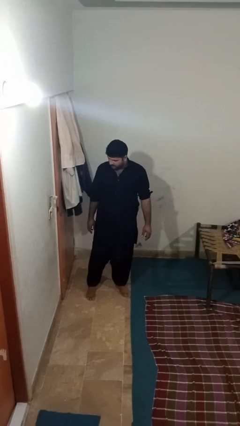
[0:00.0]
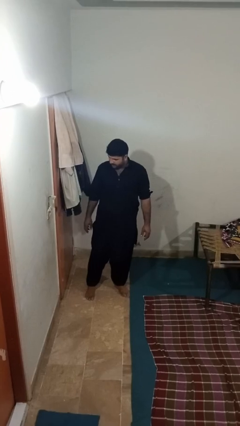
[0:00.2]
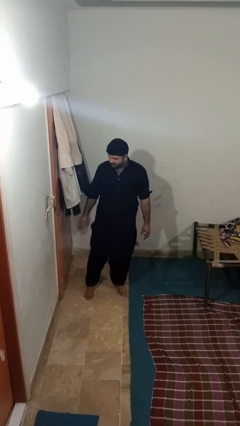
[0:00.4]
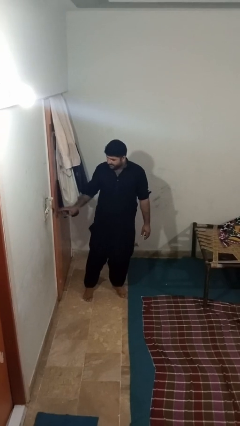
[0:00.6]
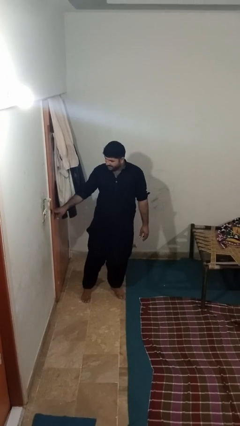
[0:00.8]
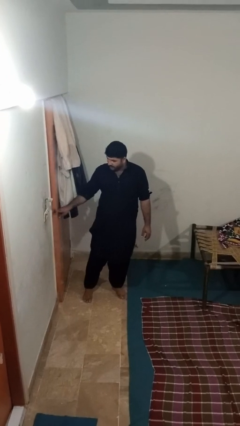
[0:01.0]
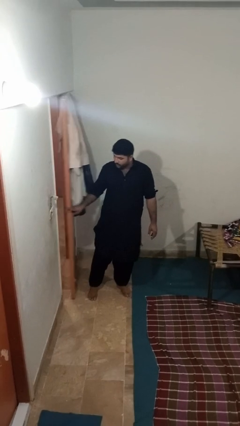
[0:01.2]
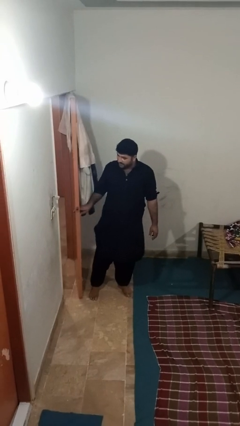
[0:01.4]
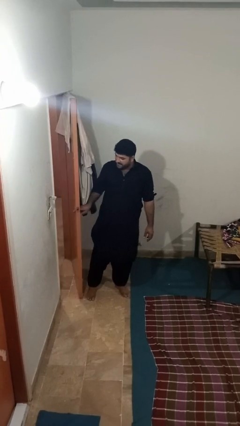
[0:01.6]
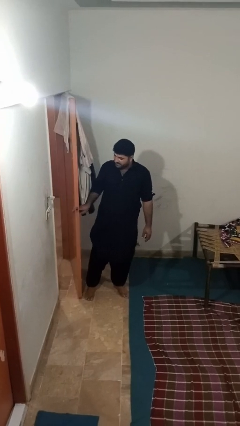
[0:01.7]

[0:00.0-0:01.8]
person opens facility door

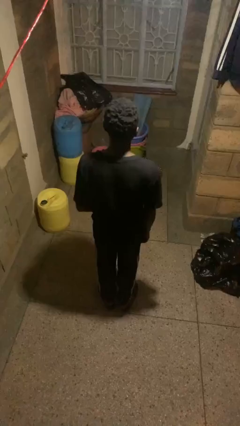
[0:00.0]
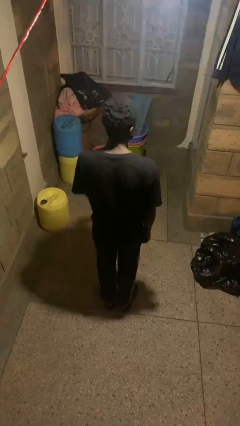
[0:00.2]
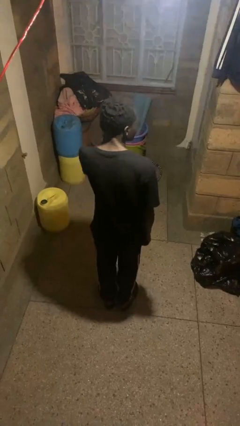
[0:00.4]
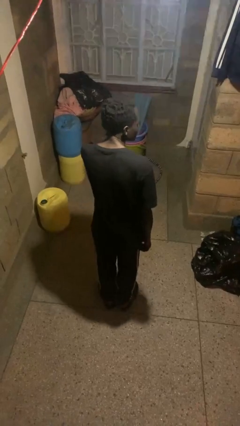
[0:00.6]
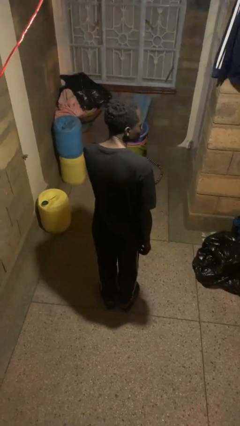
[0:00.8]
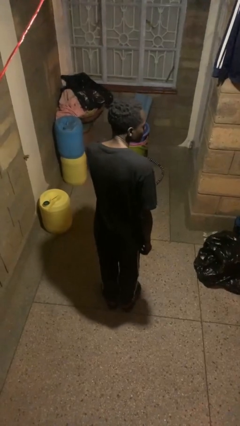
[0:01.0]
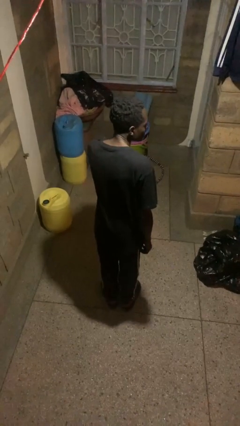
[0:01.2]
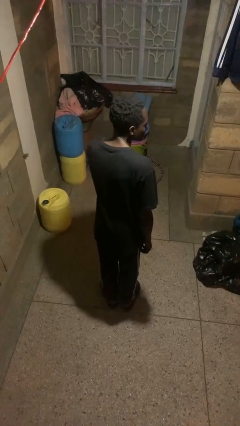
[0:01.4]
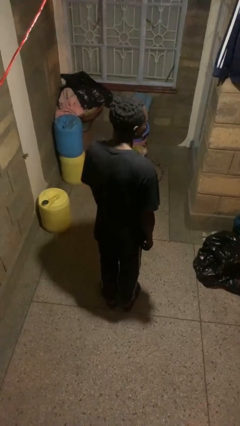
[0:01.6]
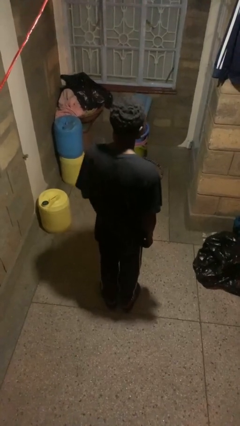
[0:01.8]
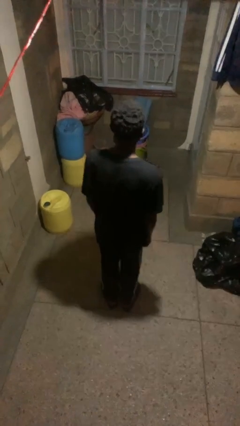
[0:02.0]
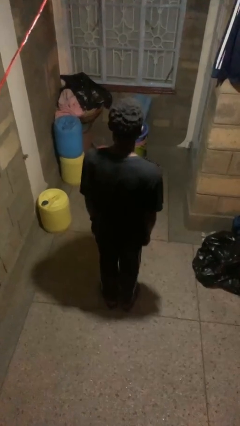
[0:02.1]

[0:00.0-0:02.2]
person touches earlobe

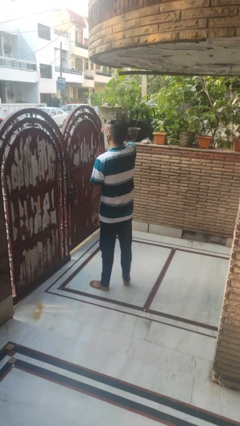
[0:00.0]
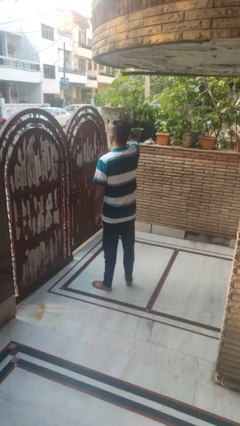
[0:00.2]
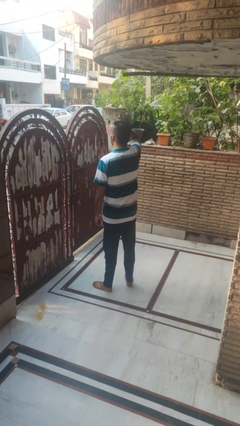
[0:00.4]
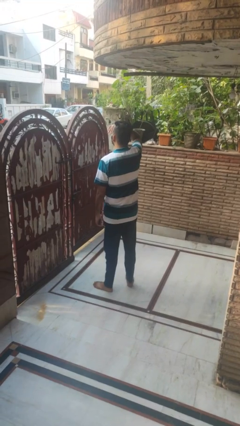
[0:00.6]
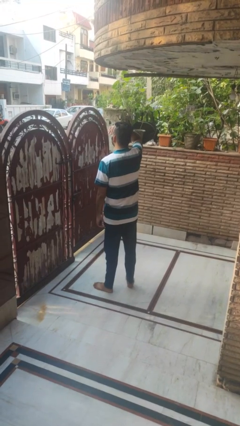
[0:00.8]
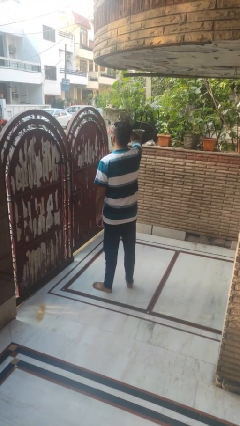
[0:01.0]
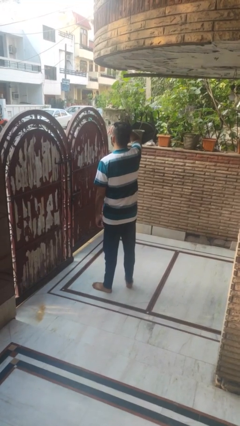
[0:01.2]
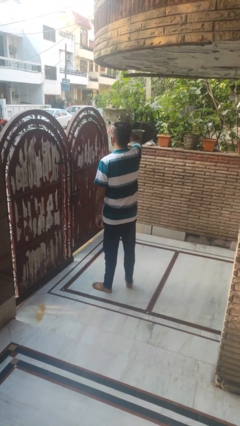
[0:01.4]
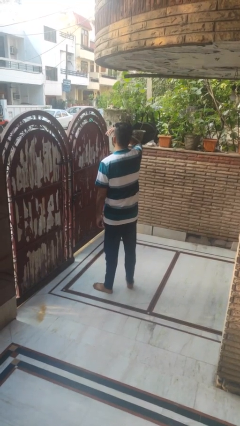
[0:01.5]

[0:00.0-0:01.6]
person shades eyes

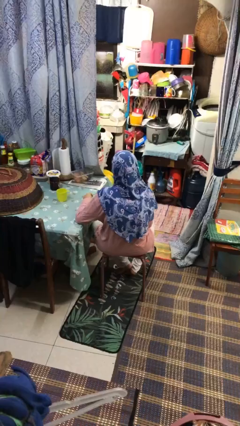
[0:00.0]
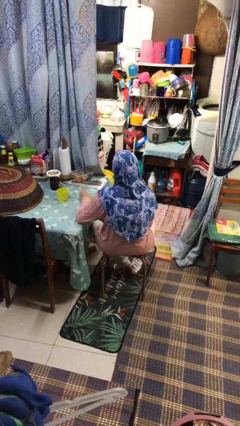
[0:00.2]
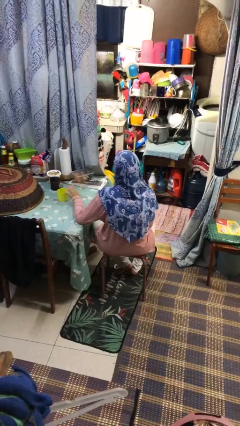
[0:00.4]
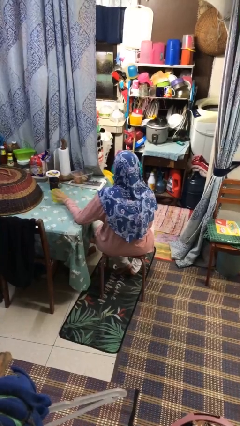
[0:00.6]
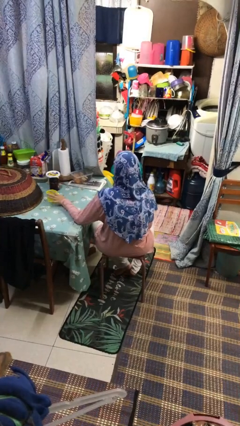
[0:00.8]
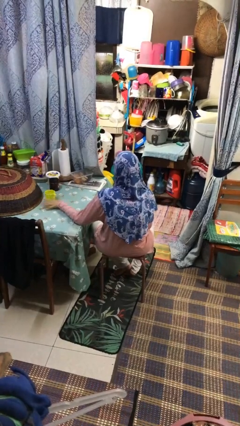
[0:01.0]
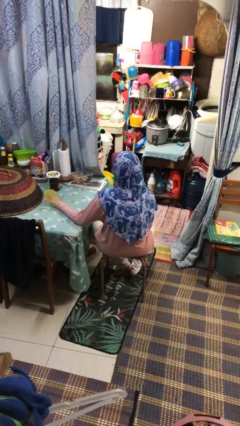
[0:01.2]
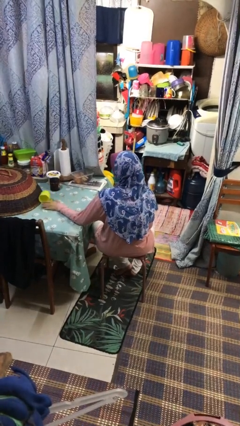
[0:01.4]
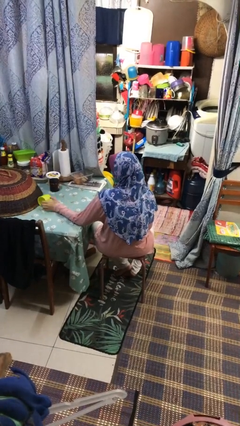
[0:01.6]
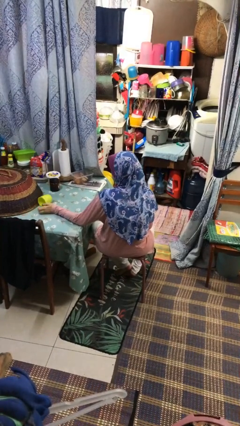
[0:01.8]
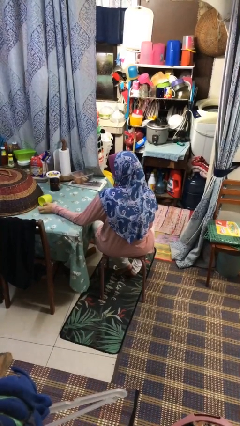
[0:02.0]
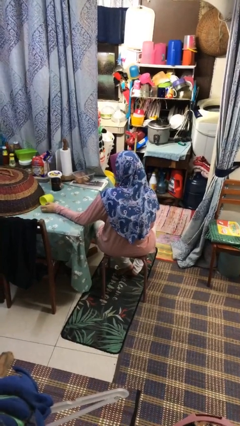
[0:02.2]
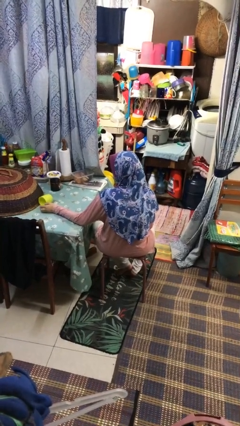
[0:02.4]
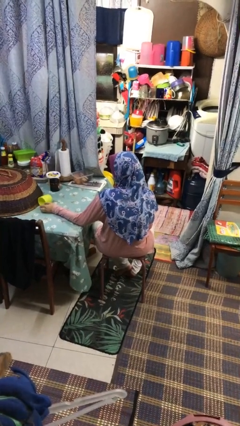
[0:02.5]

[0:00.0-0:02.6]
person knocks over glass

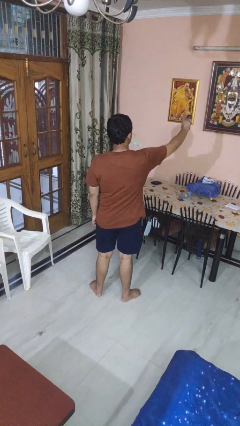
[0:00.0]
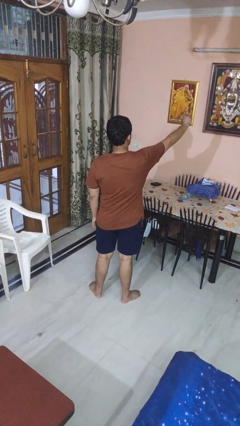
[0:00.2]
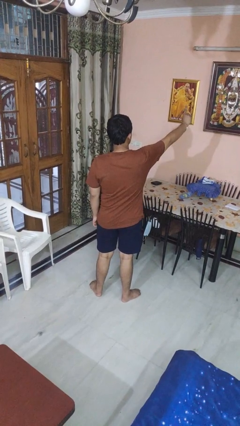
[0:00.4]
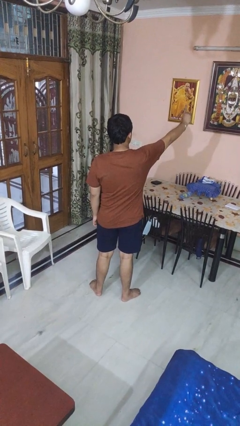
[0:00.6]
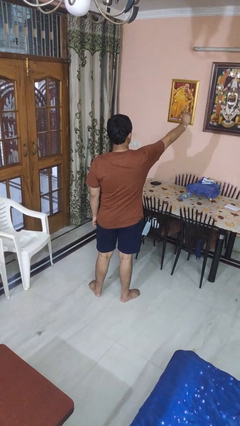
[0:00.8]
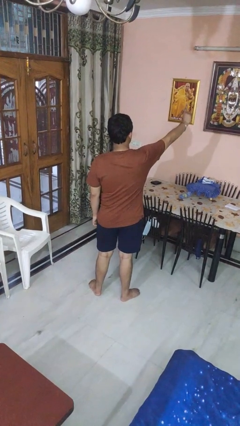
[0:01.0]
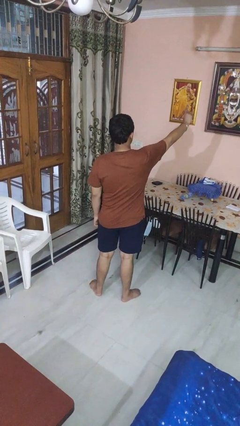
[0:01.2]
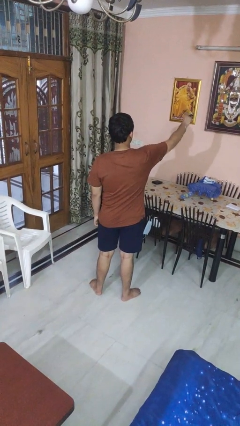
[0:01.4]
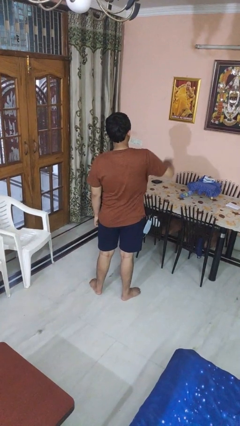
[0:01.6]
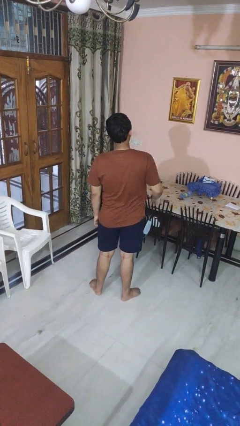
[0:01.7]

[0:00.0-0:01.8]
person gestures number one

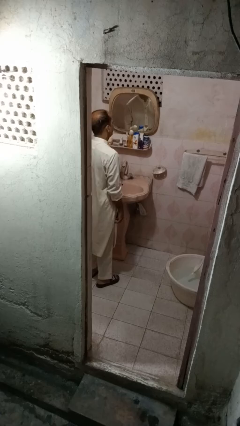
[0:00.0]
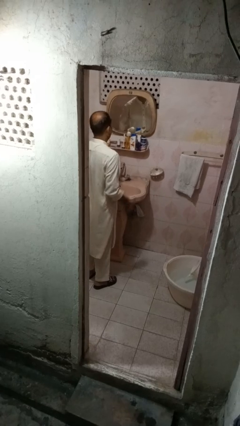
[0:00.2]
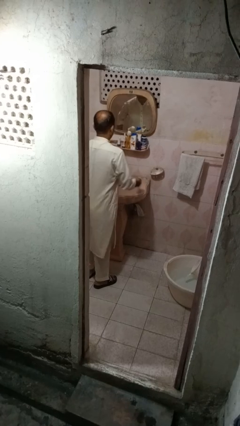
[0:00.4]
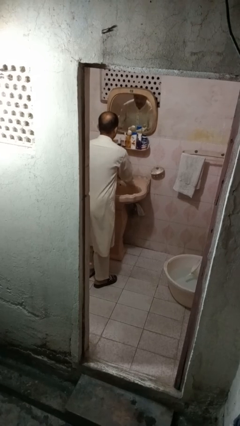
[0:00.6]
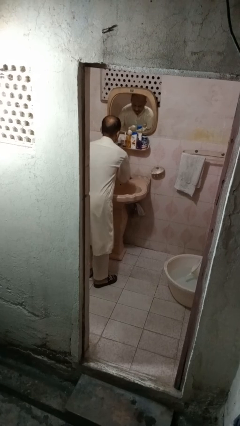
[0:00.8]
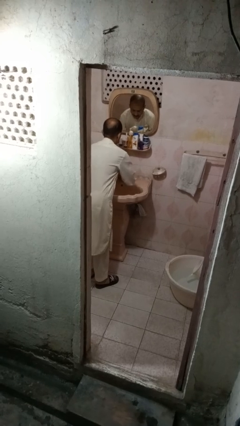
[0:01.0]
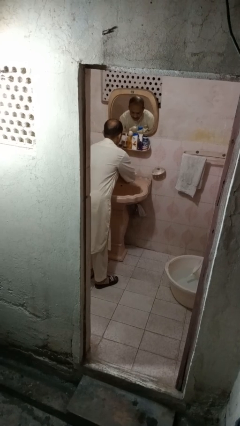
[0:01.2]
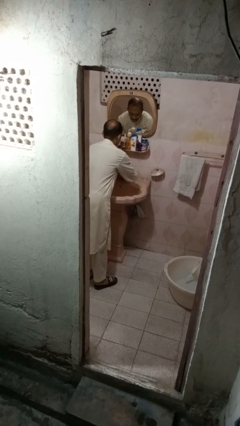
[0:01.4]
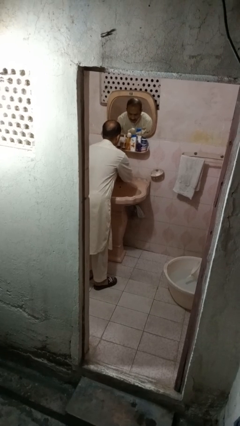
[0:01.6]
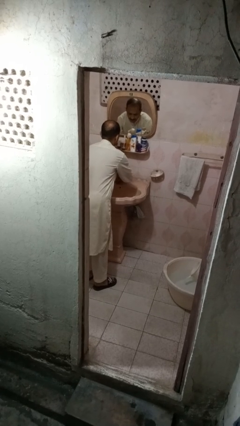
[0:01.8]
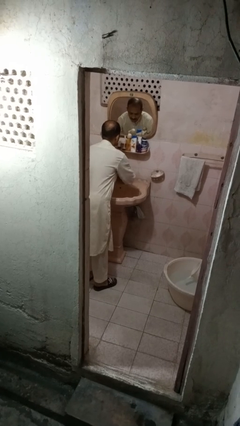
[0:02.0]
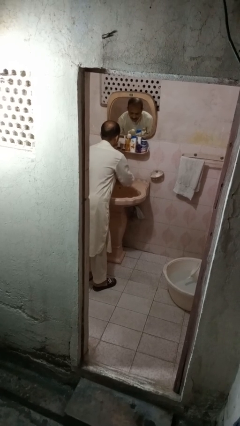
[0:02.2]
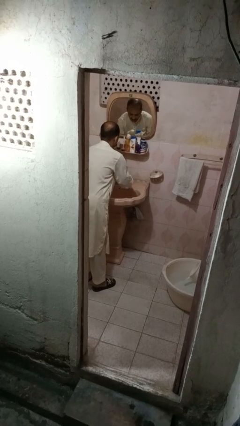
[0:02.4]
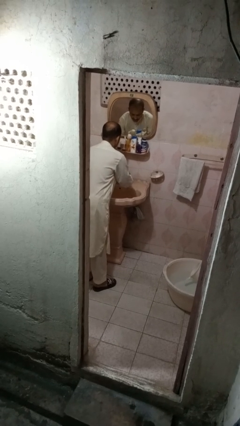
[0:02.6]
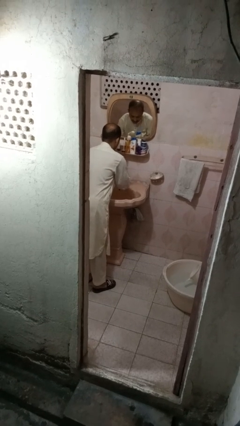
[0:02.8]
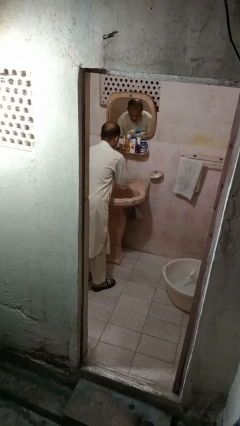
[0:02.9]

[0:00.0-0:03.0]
person washes hands

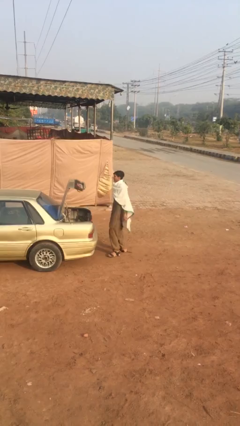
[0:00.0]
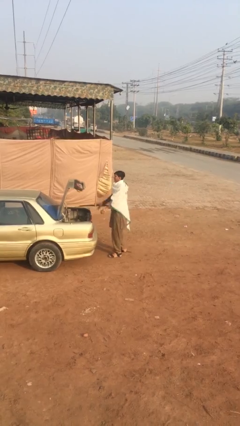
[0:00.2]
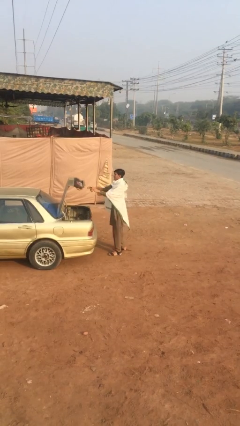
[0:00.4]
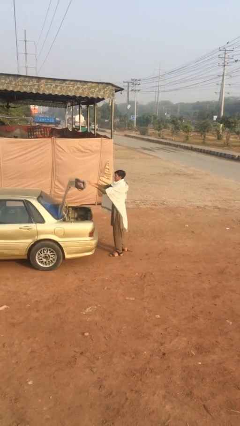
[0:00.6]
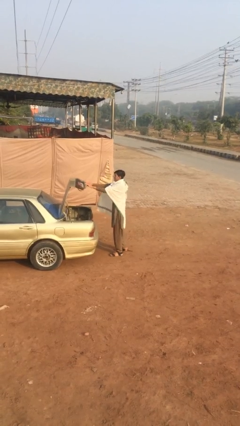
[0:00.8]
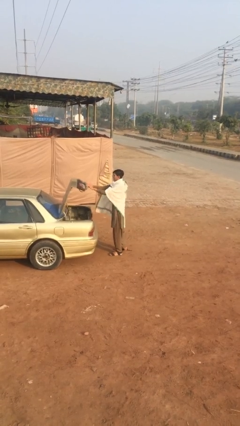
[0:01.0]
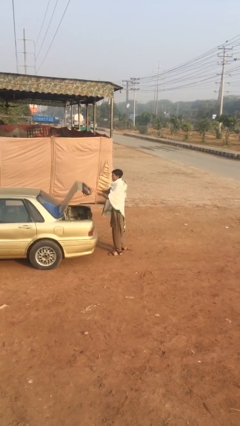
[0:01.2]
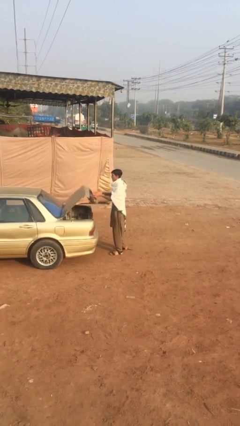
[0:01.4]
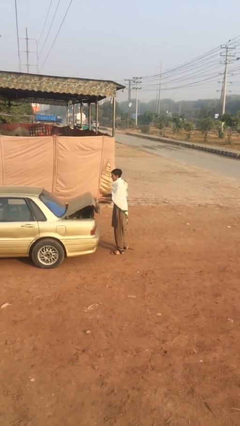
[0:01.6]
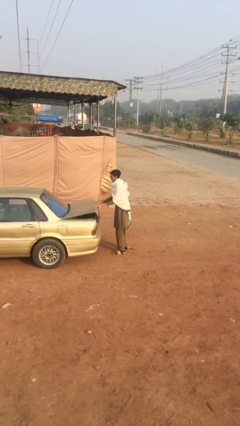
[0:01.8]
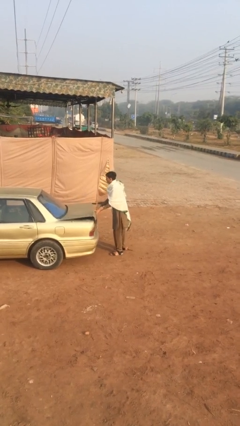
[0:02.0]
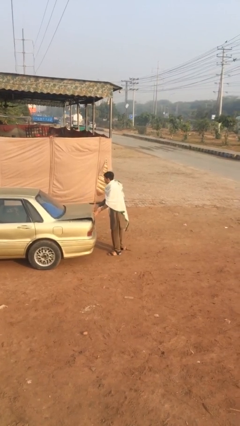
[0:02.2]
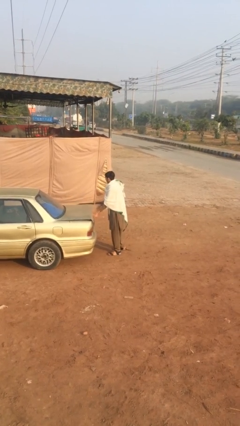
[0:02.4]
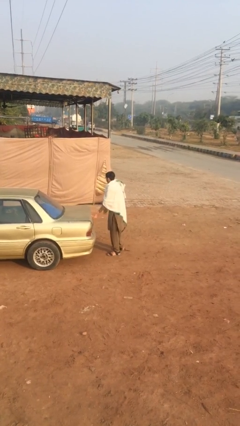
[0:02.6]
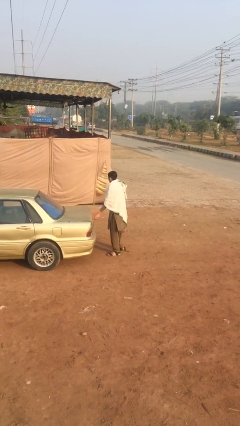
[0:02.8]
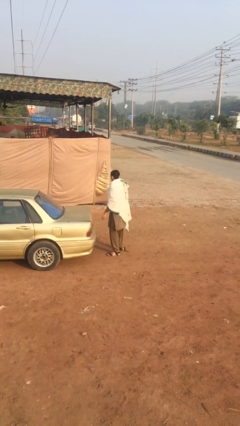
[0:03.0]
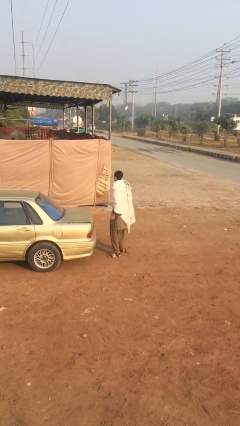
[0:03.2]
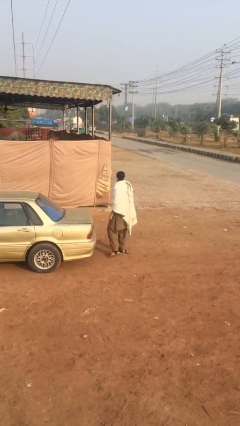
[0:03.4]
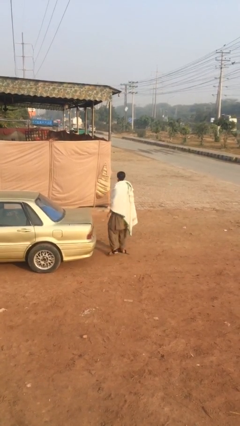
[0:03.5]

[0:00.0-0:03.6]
person closes car trunk

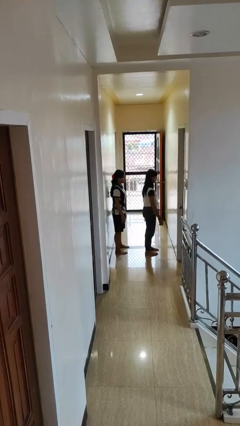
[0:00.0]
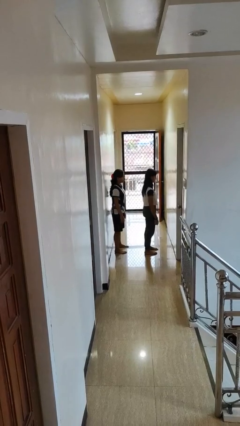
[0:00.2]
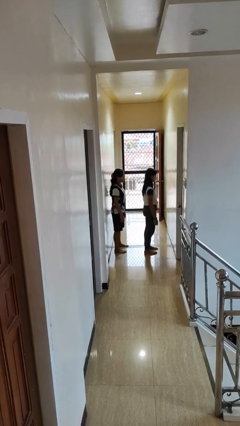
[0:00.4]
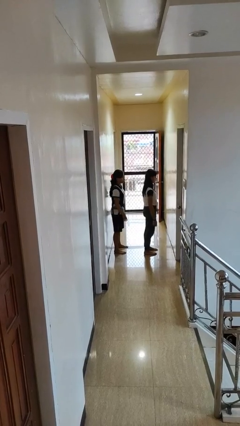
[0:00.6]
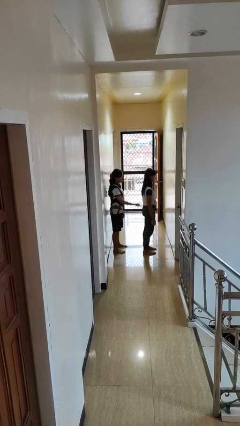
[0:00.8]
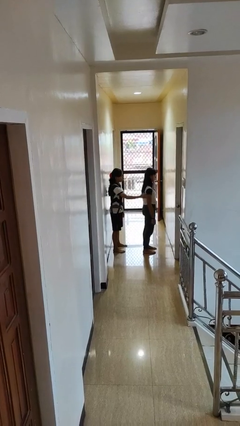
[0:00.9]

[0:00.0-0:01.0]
person grabs person by shoulder
